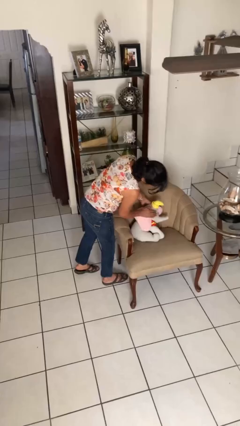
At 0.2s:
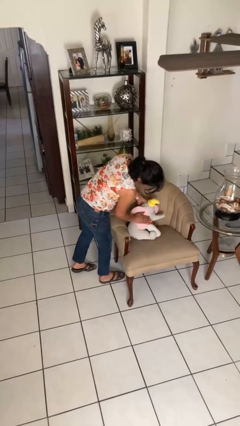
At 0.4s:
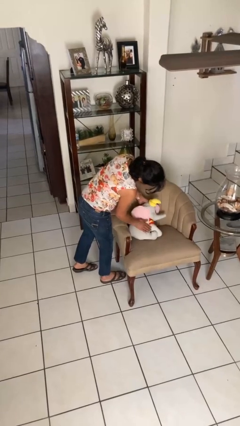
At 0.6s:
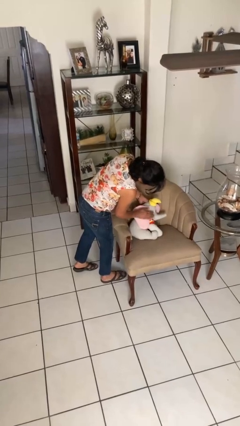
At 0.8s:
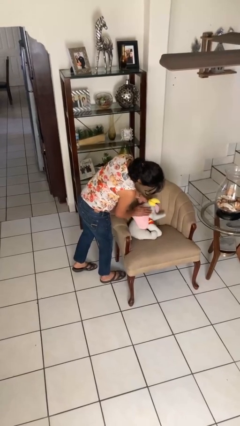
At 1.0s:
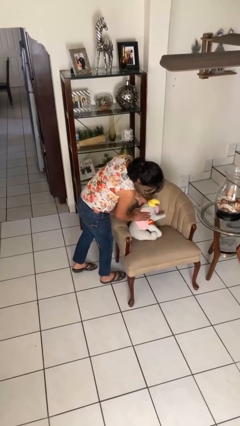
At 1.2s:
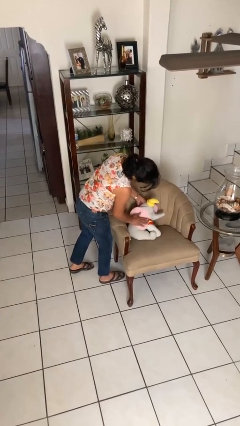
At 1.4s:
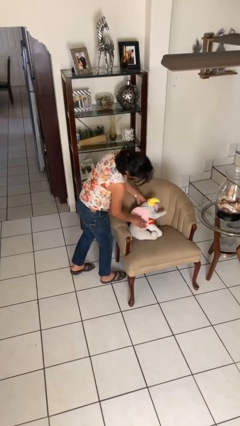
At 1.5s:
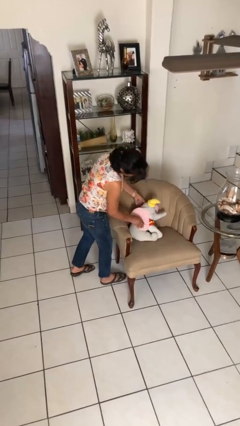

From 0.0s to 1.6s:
person waves hand over object

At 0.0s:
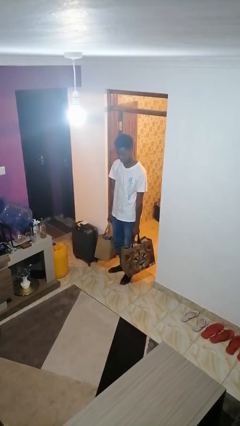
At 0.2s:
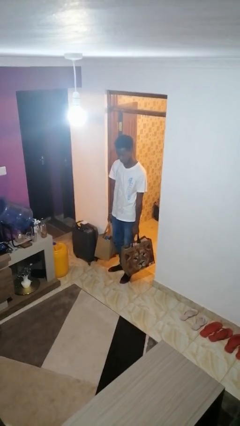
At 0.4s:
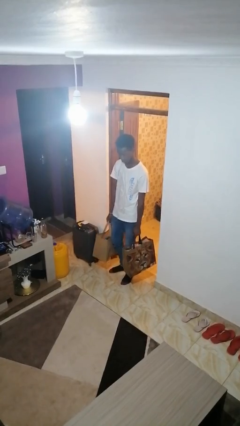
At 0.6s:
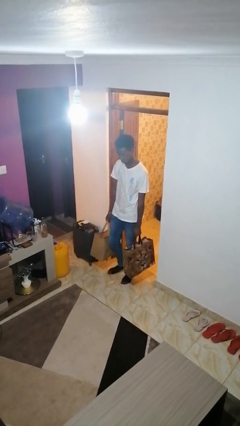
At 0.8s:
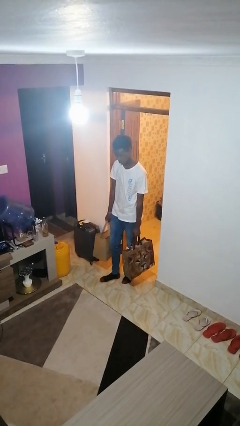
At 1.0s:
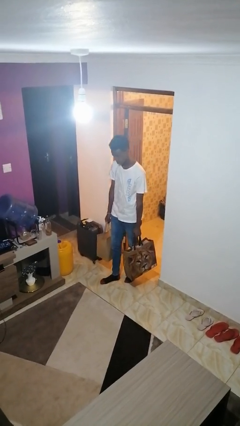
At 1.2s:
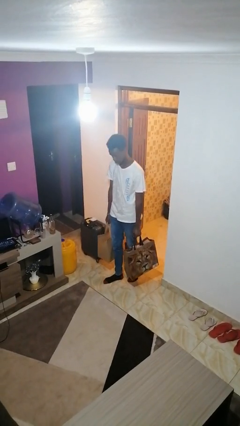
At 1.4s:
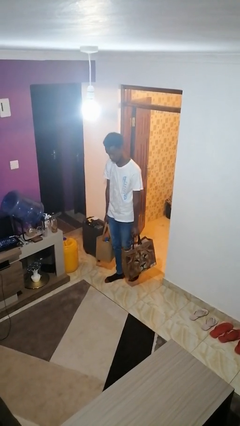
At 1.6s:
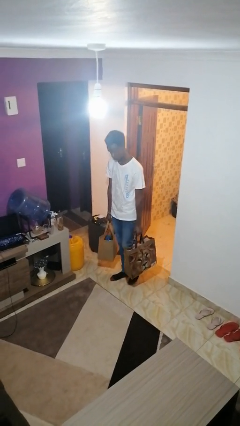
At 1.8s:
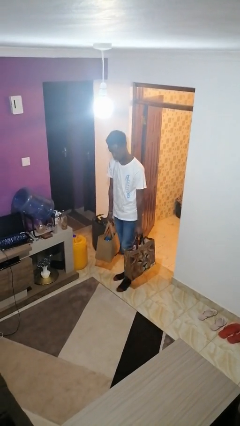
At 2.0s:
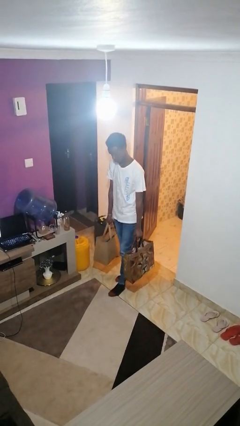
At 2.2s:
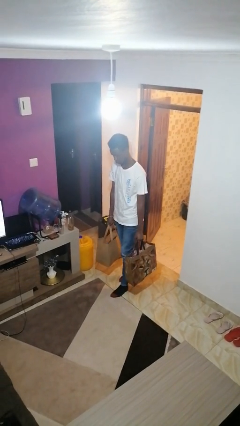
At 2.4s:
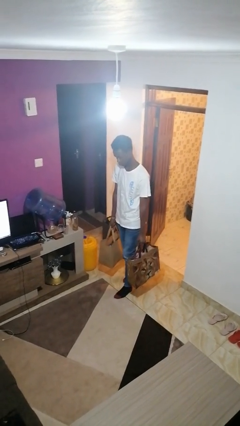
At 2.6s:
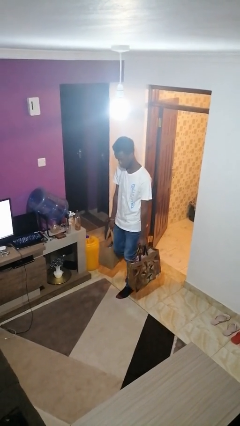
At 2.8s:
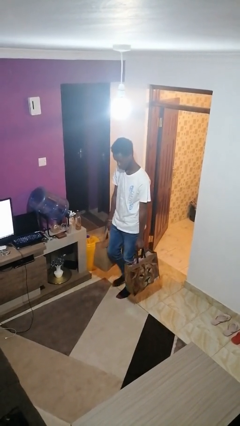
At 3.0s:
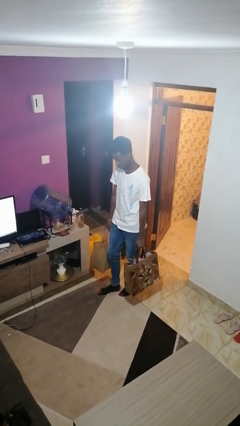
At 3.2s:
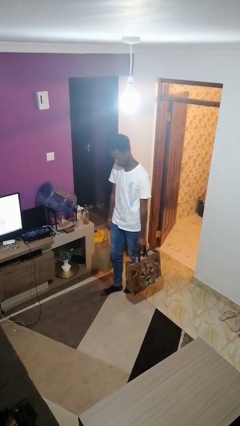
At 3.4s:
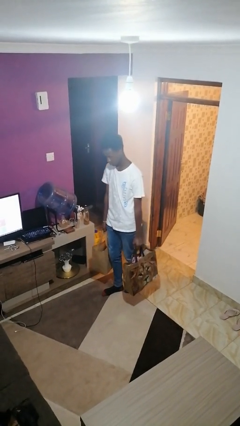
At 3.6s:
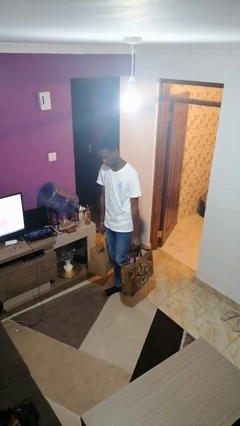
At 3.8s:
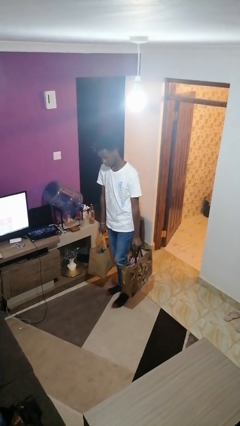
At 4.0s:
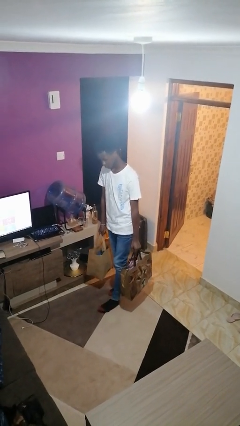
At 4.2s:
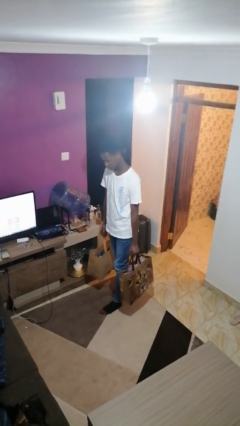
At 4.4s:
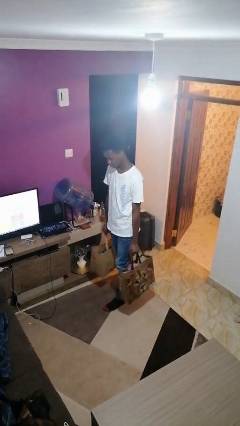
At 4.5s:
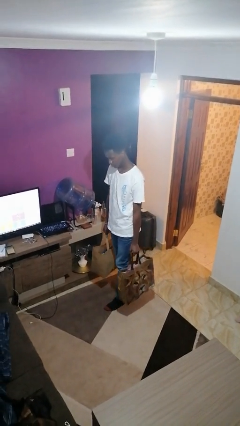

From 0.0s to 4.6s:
person carries groceries

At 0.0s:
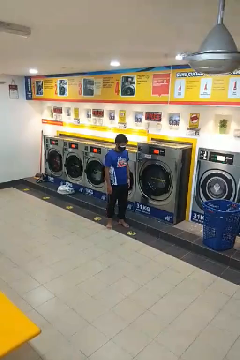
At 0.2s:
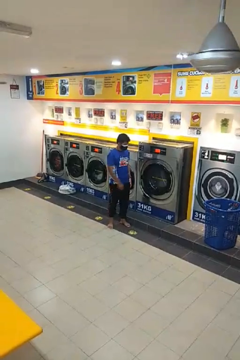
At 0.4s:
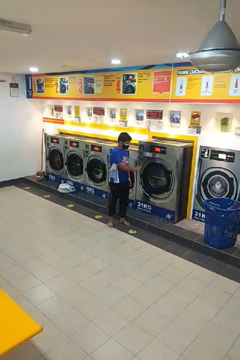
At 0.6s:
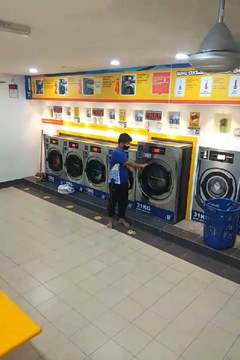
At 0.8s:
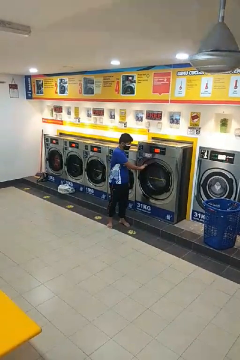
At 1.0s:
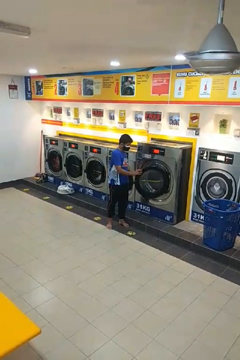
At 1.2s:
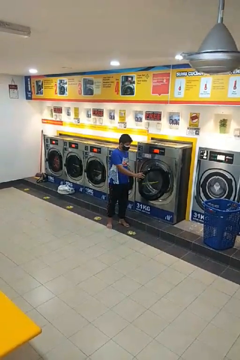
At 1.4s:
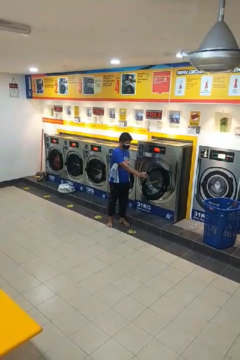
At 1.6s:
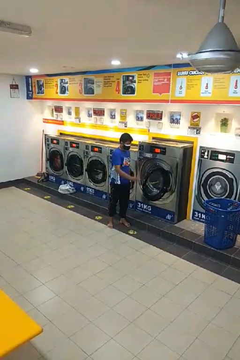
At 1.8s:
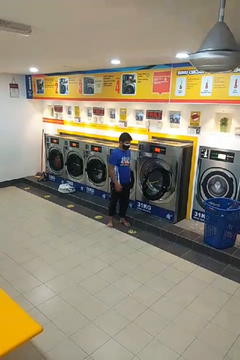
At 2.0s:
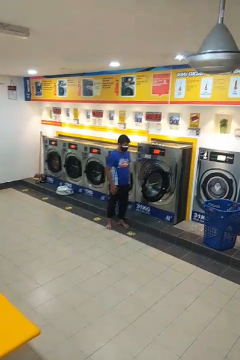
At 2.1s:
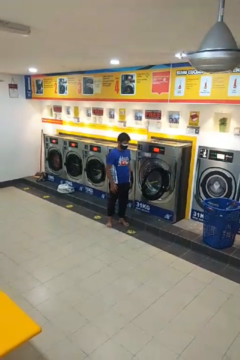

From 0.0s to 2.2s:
person opens clothes washer

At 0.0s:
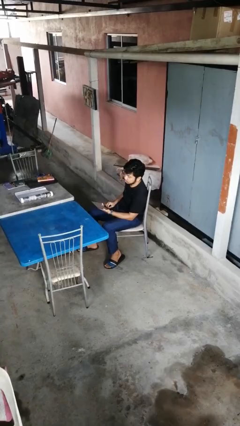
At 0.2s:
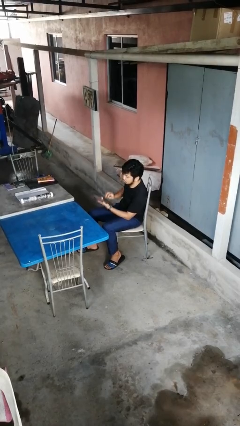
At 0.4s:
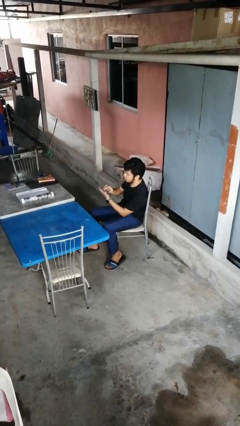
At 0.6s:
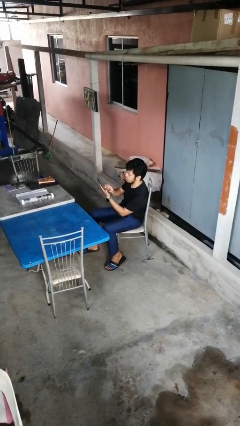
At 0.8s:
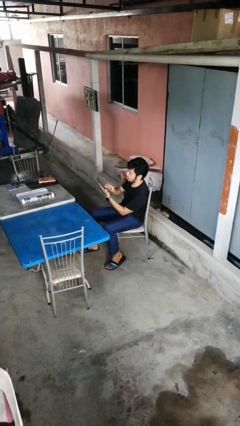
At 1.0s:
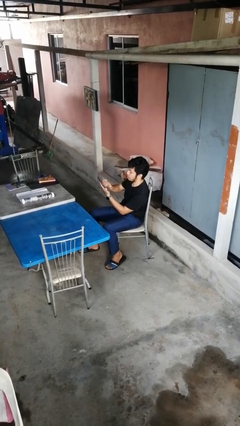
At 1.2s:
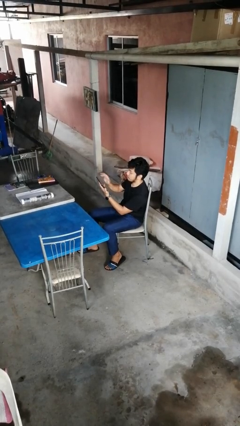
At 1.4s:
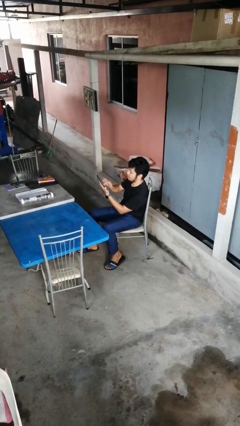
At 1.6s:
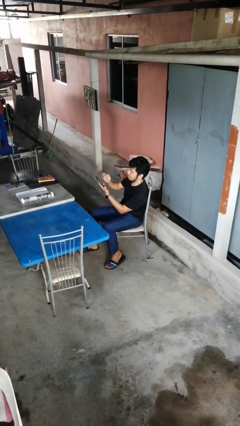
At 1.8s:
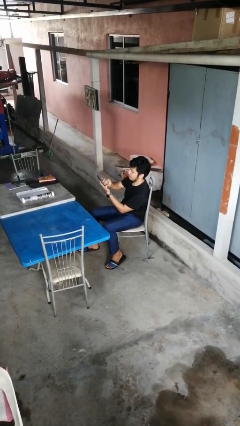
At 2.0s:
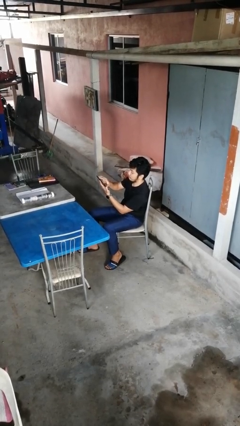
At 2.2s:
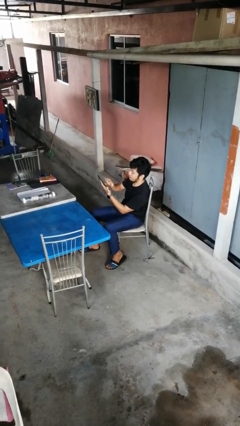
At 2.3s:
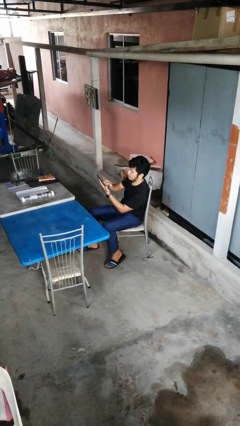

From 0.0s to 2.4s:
person interacts with tablet

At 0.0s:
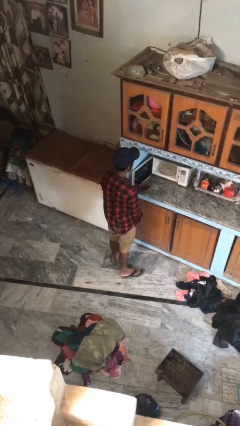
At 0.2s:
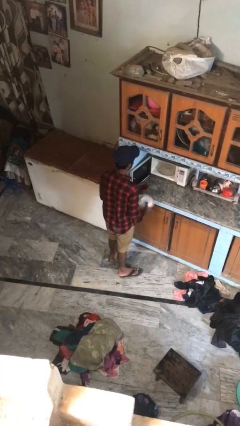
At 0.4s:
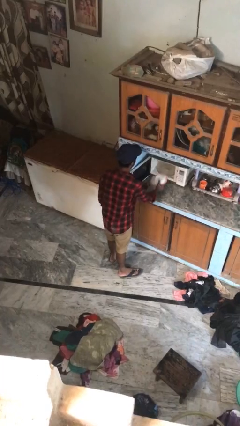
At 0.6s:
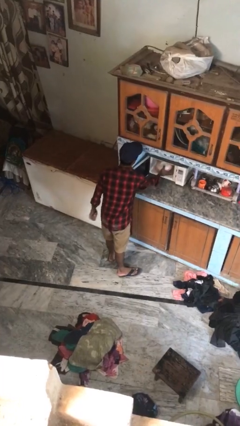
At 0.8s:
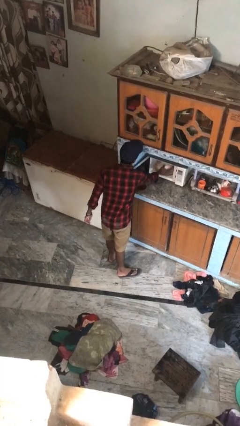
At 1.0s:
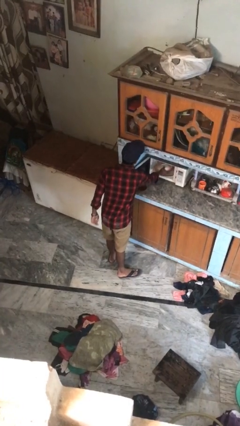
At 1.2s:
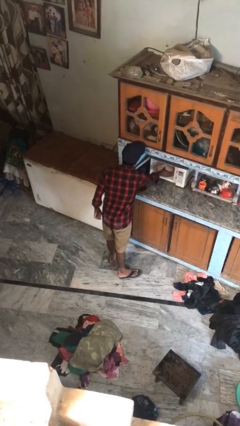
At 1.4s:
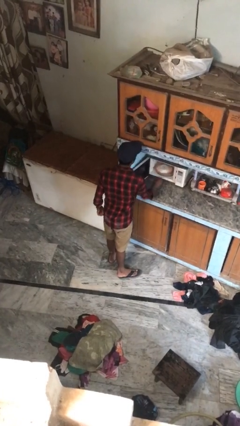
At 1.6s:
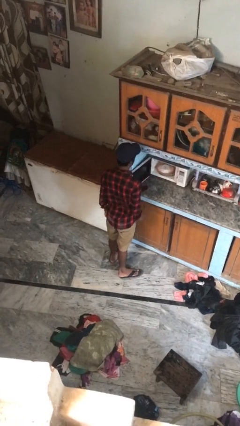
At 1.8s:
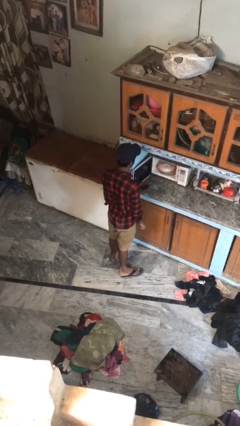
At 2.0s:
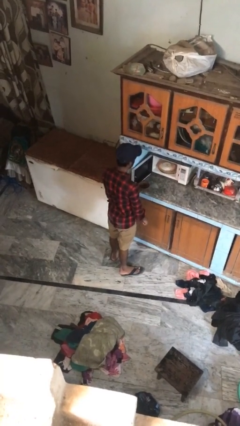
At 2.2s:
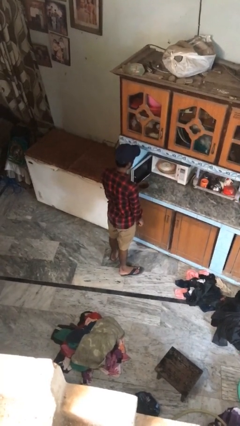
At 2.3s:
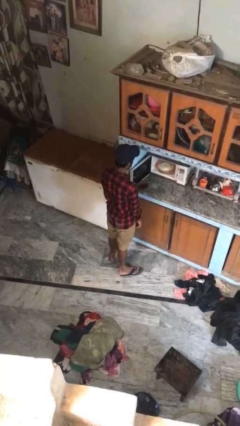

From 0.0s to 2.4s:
person puts object into oven

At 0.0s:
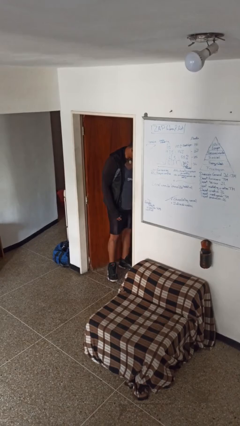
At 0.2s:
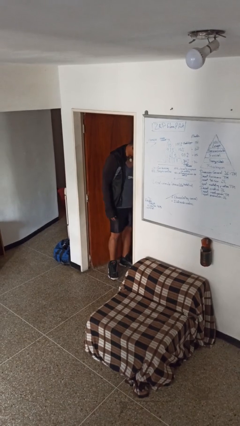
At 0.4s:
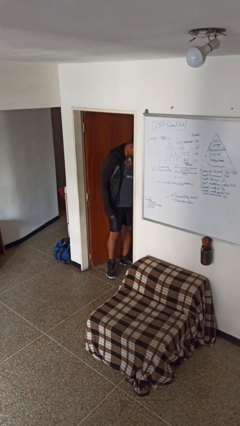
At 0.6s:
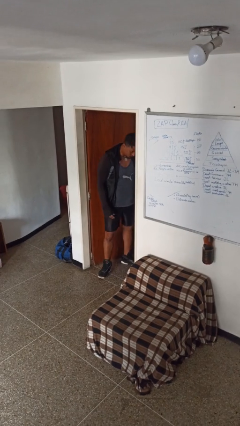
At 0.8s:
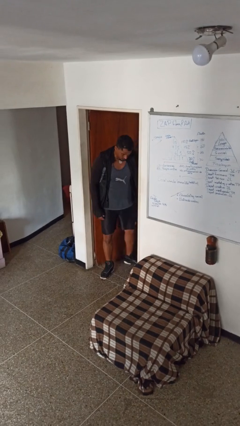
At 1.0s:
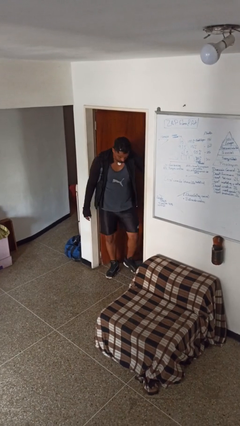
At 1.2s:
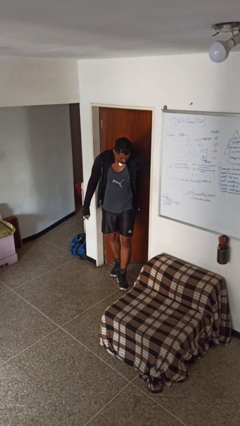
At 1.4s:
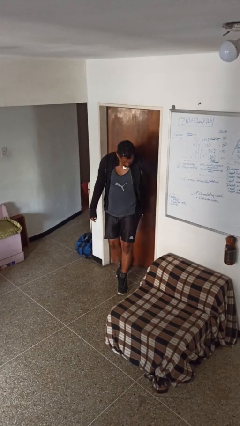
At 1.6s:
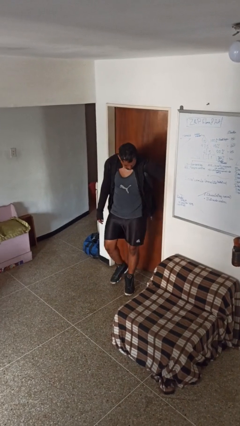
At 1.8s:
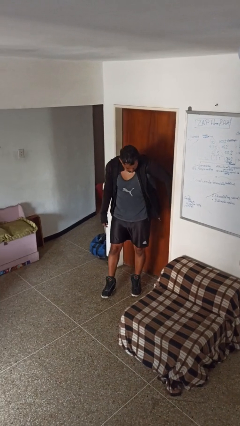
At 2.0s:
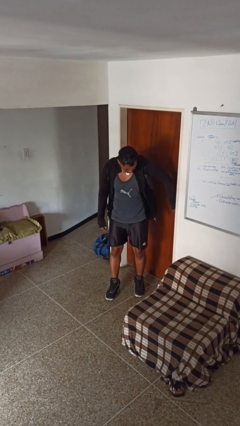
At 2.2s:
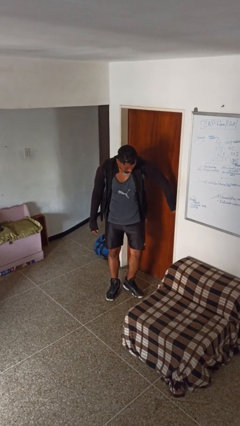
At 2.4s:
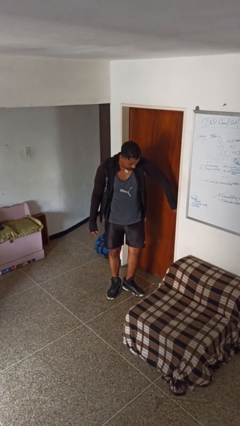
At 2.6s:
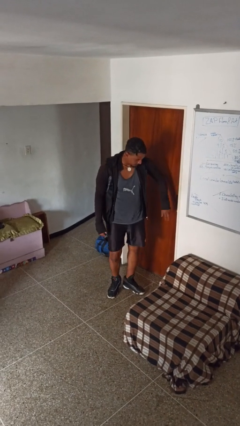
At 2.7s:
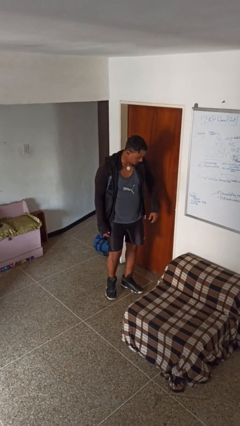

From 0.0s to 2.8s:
person closes facility door

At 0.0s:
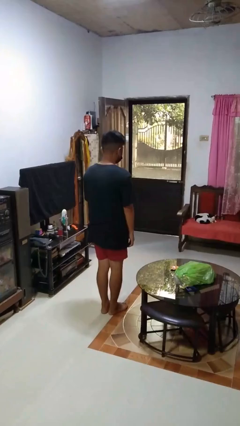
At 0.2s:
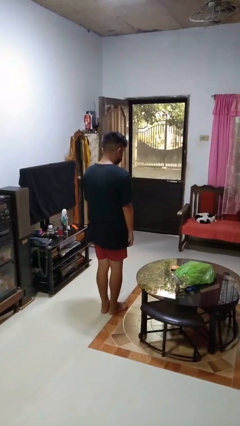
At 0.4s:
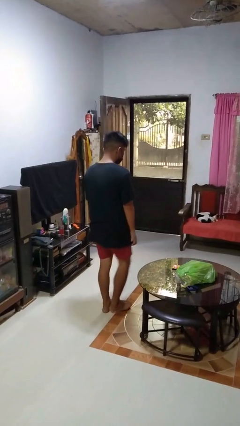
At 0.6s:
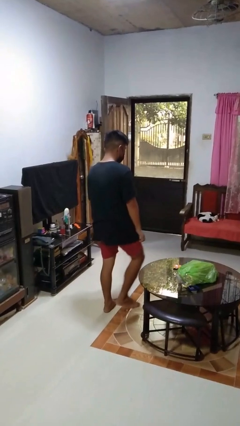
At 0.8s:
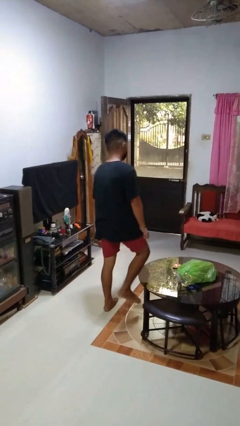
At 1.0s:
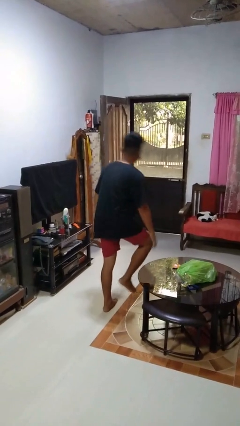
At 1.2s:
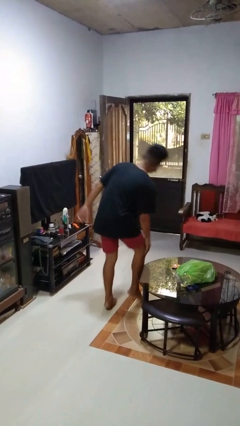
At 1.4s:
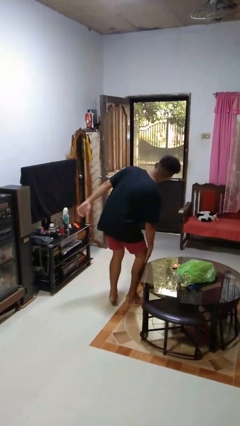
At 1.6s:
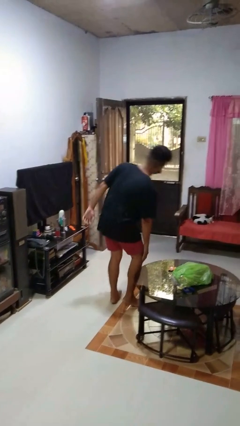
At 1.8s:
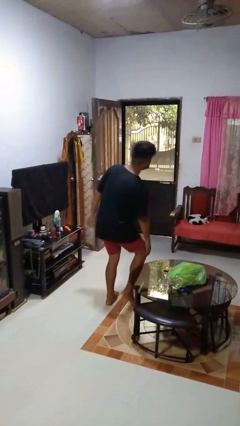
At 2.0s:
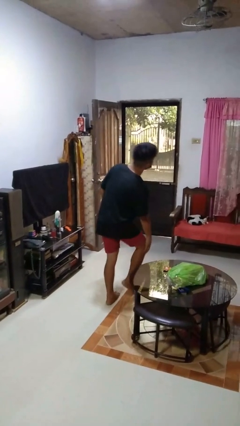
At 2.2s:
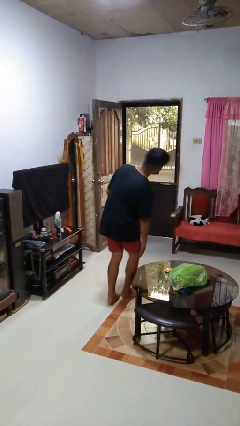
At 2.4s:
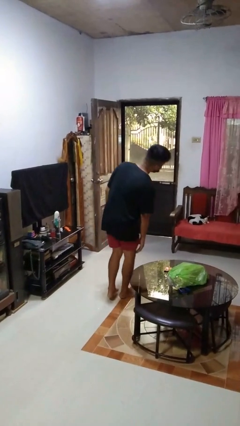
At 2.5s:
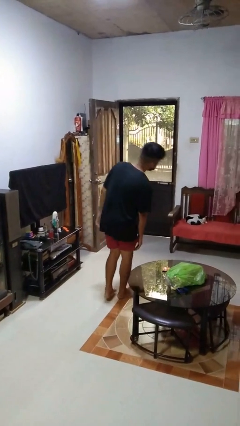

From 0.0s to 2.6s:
person bumps into table
